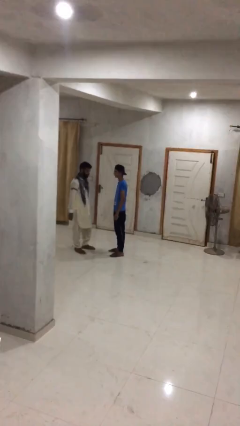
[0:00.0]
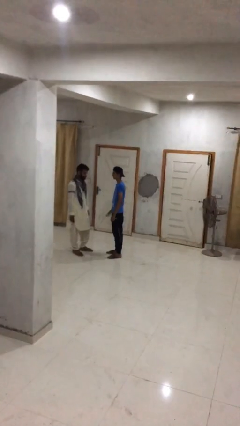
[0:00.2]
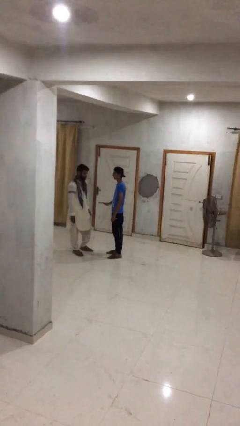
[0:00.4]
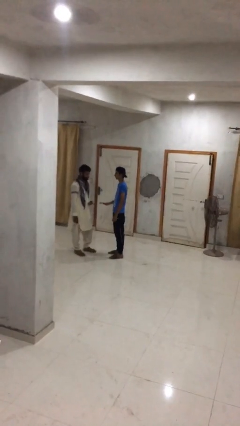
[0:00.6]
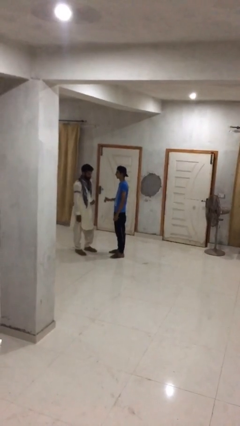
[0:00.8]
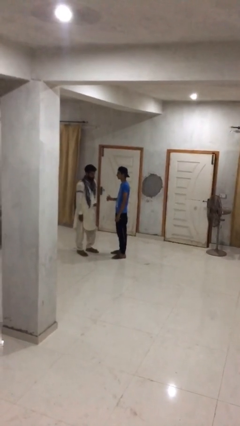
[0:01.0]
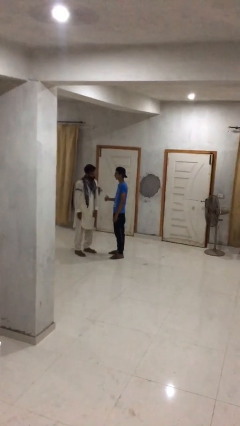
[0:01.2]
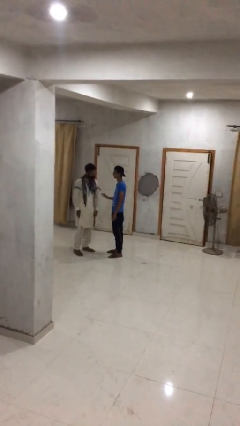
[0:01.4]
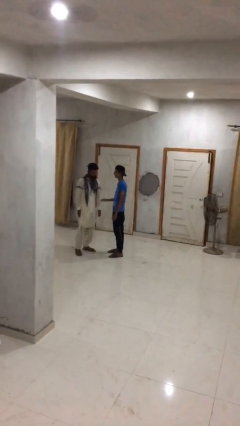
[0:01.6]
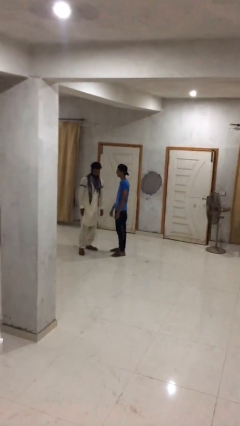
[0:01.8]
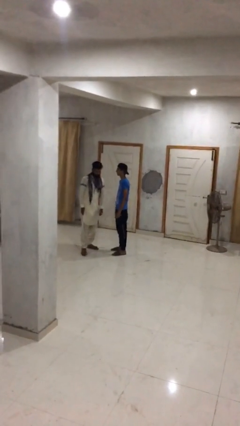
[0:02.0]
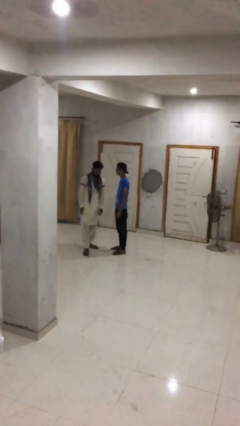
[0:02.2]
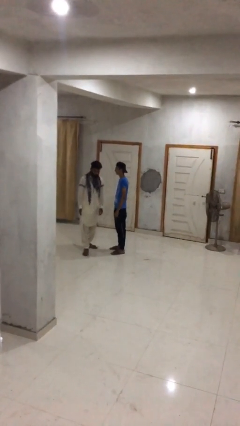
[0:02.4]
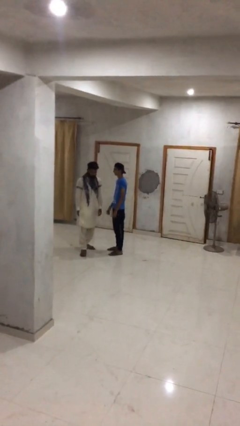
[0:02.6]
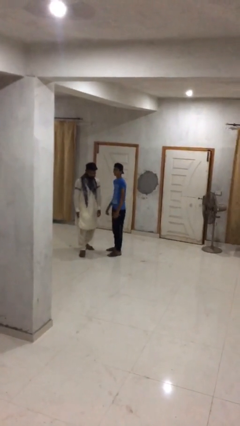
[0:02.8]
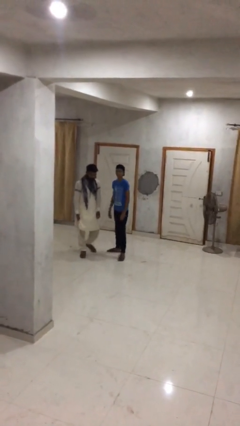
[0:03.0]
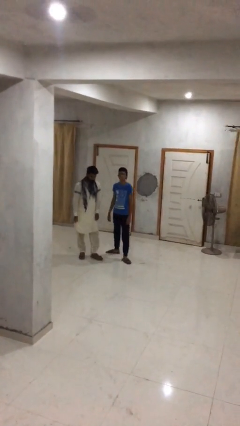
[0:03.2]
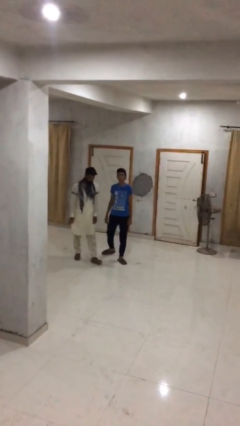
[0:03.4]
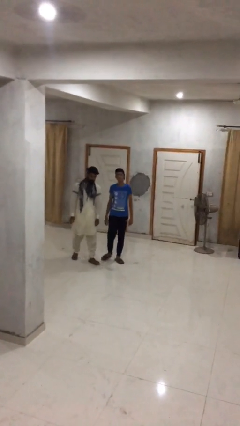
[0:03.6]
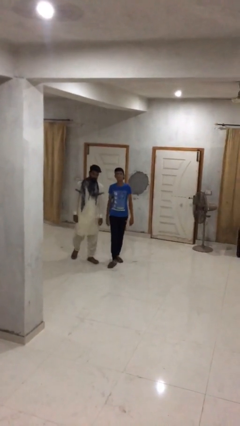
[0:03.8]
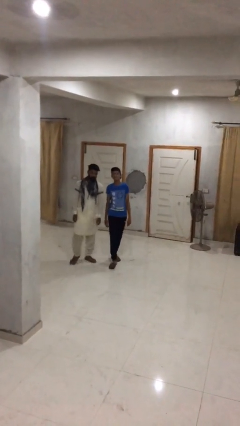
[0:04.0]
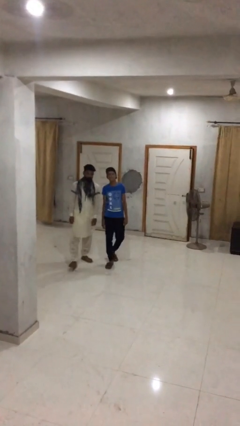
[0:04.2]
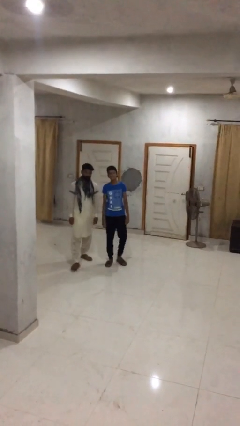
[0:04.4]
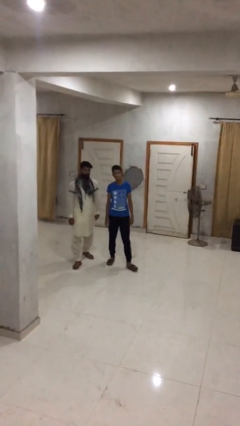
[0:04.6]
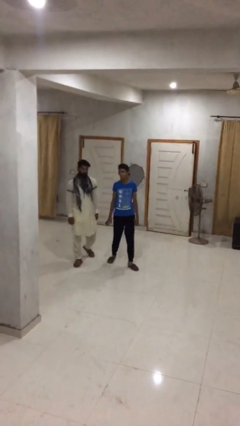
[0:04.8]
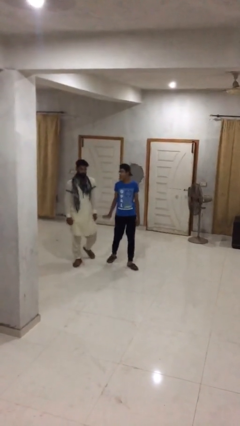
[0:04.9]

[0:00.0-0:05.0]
person talks to person

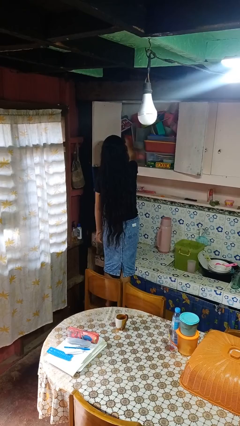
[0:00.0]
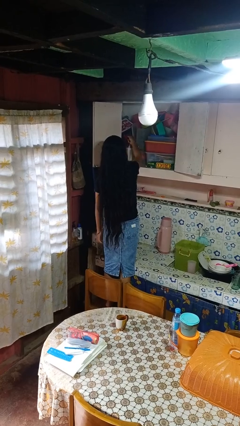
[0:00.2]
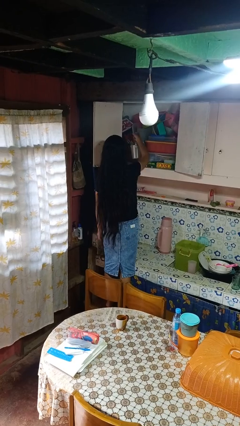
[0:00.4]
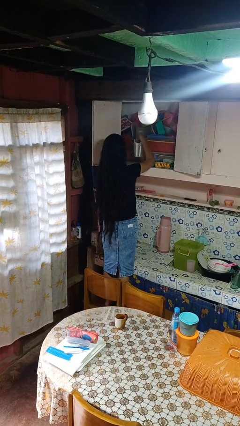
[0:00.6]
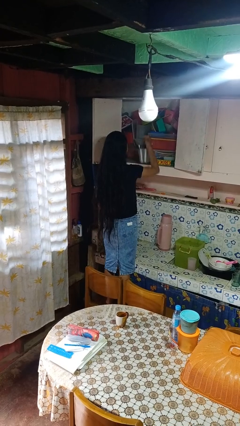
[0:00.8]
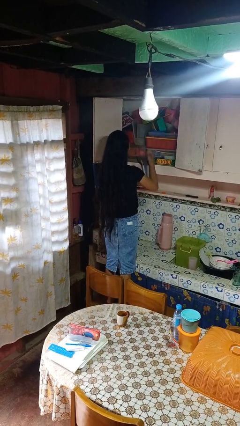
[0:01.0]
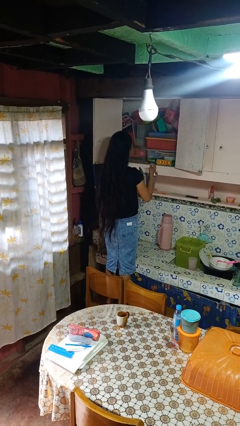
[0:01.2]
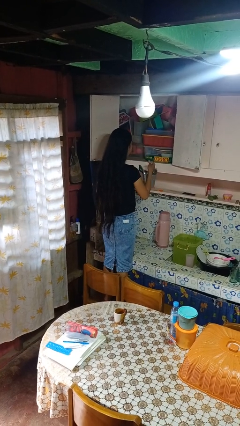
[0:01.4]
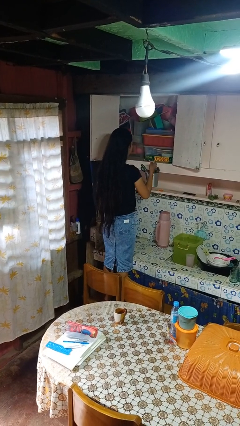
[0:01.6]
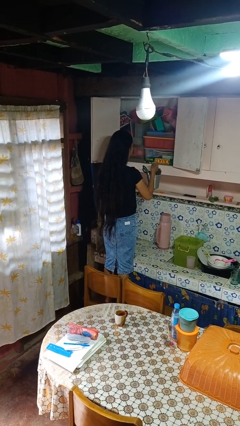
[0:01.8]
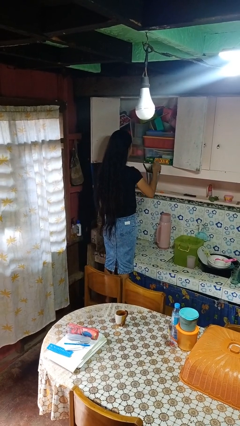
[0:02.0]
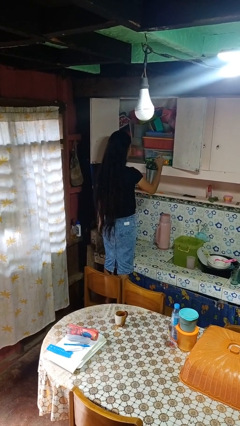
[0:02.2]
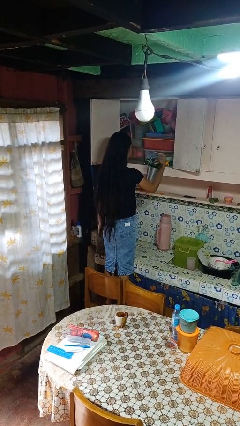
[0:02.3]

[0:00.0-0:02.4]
person takes object from cabinet

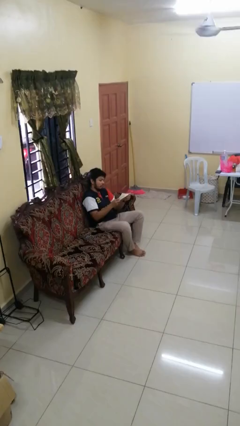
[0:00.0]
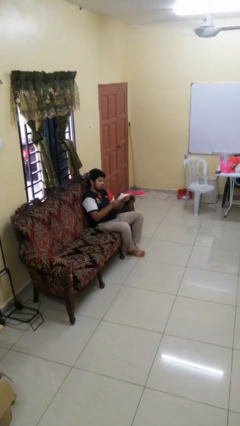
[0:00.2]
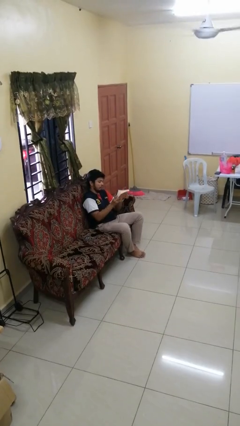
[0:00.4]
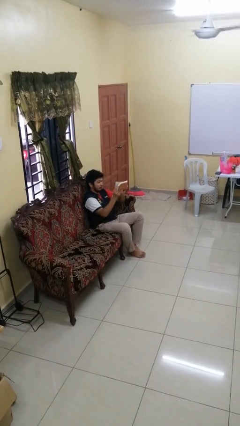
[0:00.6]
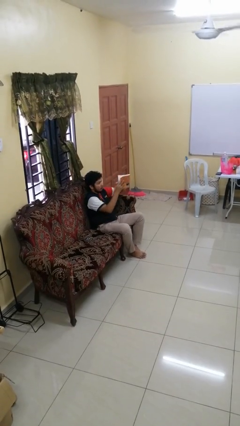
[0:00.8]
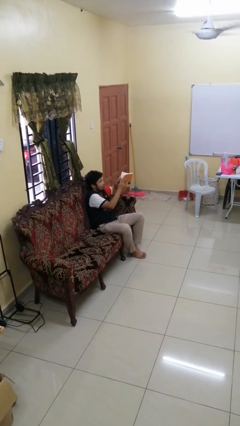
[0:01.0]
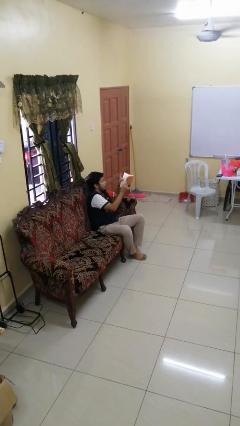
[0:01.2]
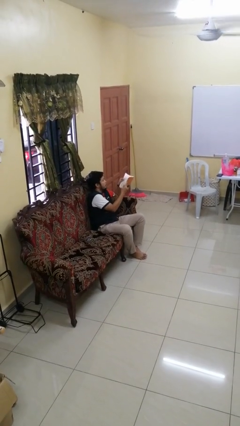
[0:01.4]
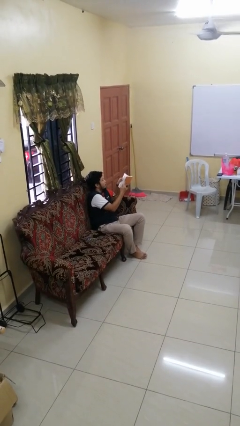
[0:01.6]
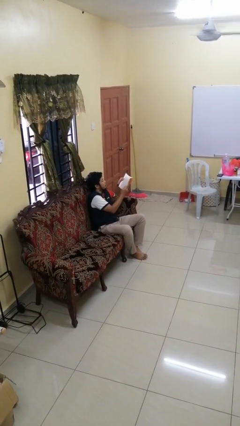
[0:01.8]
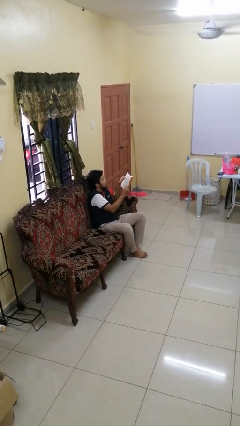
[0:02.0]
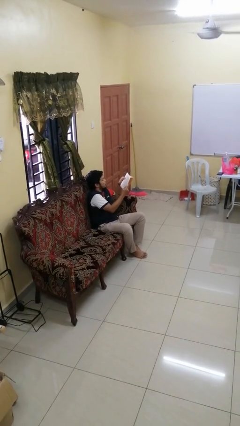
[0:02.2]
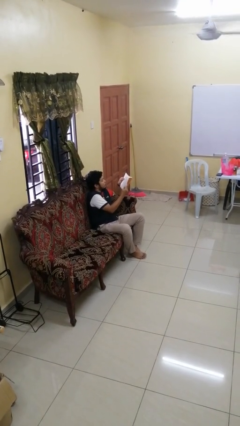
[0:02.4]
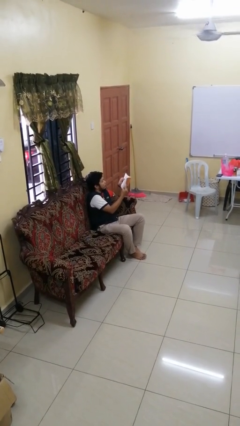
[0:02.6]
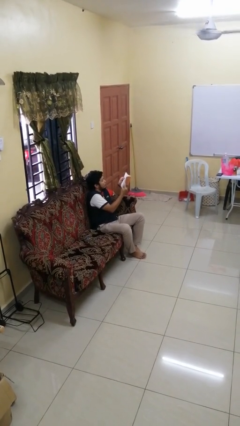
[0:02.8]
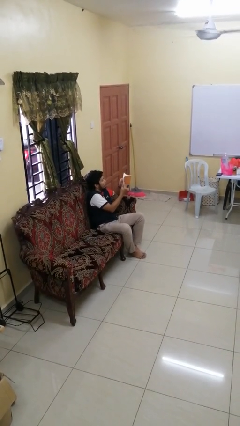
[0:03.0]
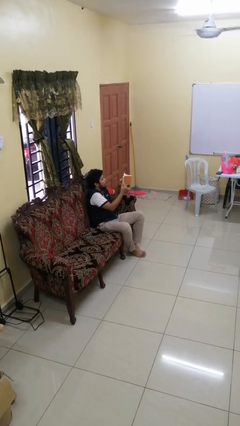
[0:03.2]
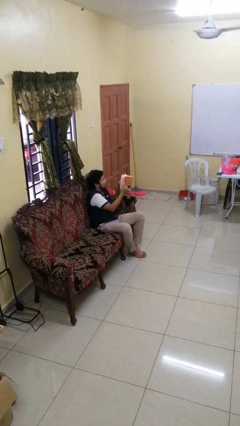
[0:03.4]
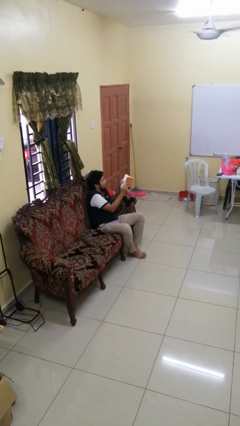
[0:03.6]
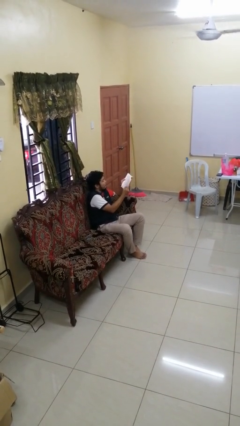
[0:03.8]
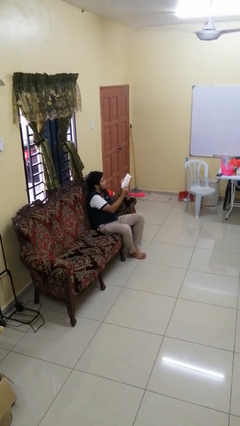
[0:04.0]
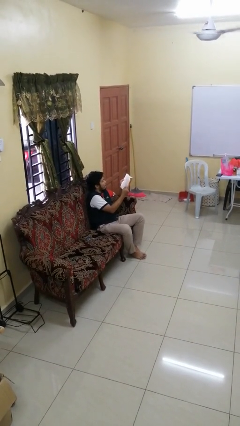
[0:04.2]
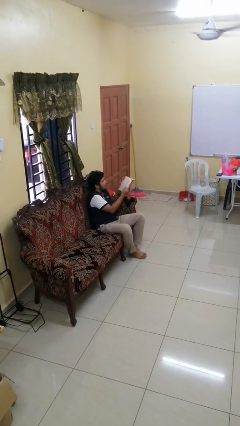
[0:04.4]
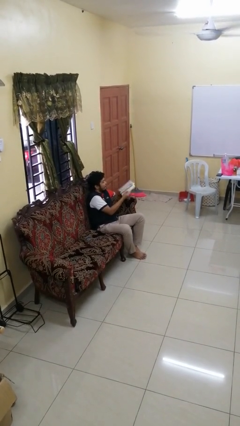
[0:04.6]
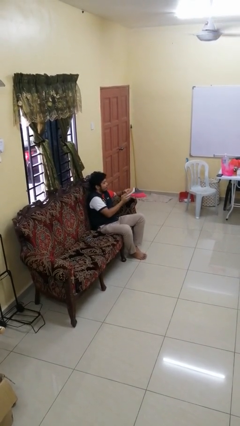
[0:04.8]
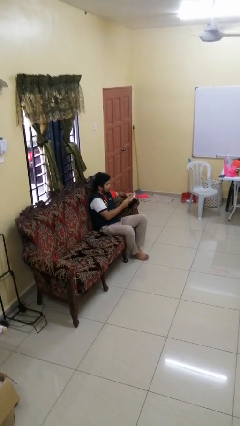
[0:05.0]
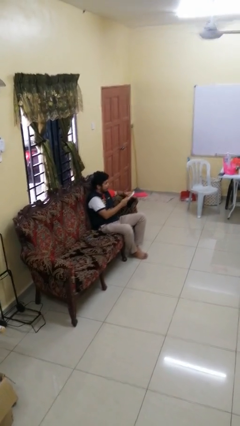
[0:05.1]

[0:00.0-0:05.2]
person reads book

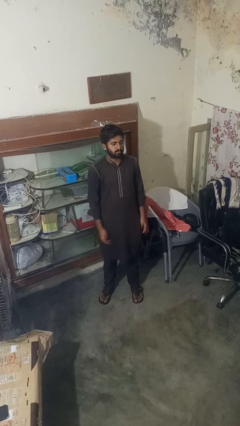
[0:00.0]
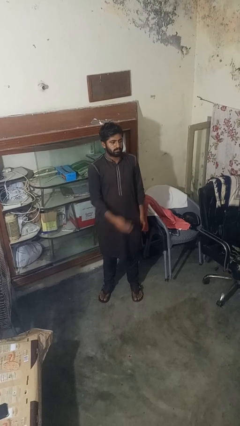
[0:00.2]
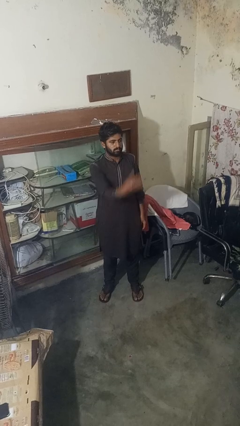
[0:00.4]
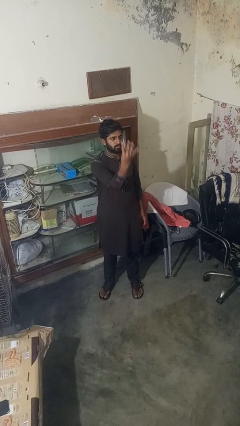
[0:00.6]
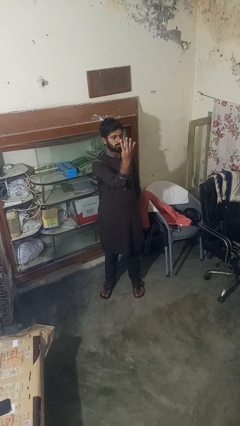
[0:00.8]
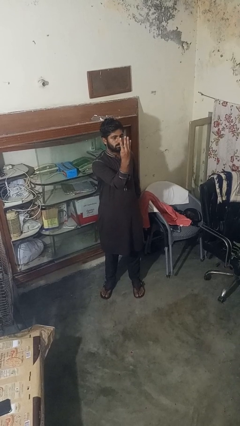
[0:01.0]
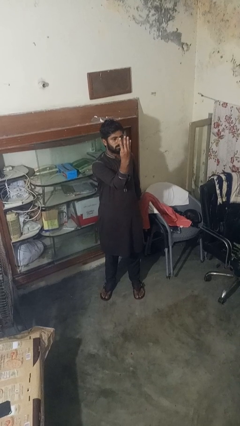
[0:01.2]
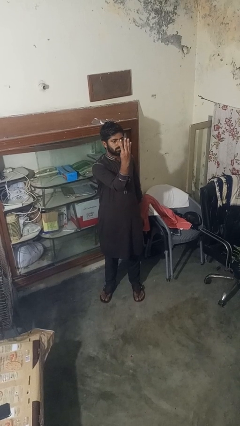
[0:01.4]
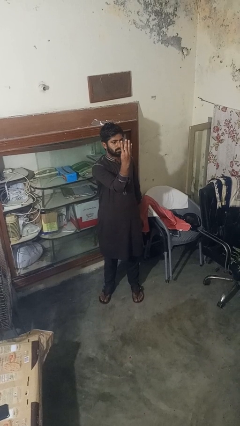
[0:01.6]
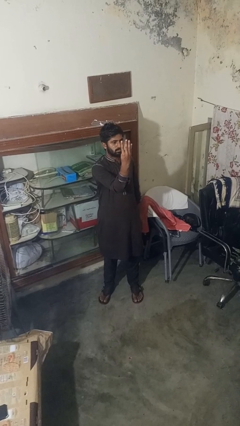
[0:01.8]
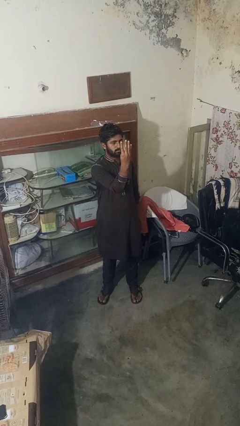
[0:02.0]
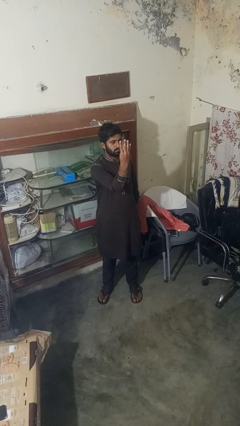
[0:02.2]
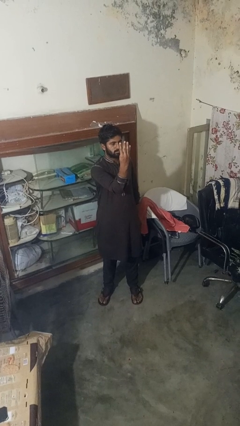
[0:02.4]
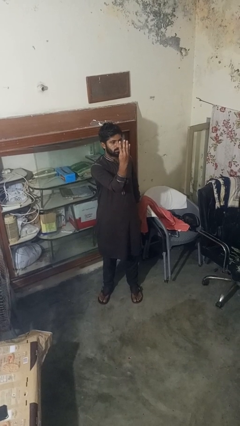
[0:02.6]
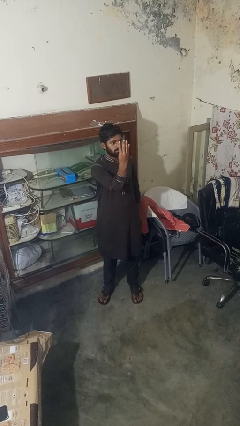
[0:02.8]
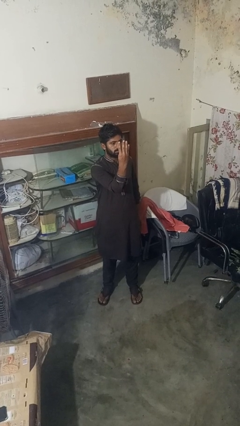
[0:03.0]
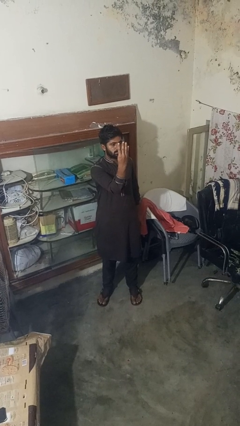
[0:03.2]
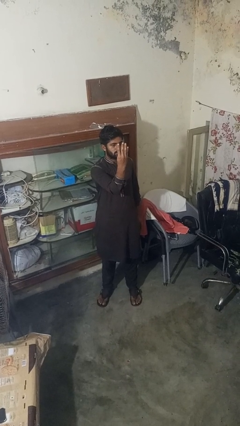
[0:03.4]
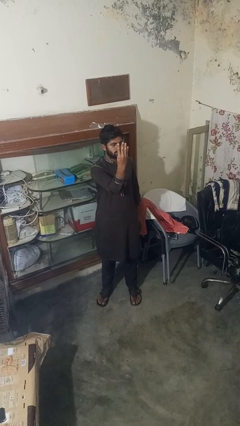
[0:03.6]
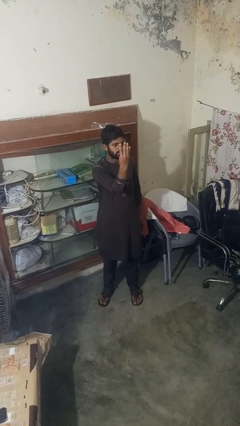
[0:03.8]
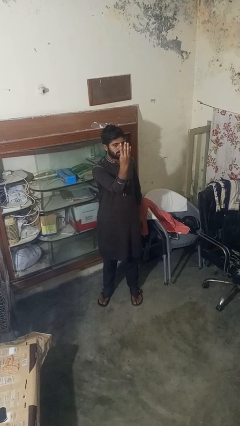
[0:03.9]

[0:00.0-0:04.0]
person gestures number four

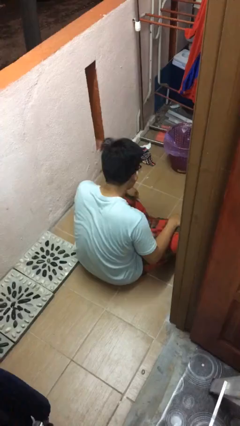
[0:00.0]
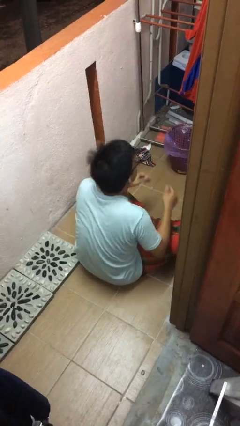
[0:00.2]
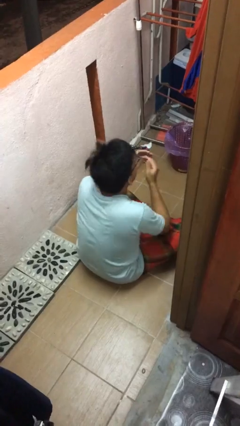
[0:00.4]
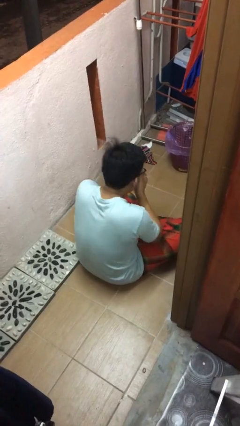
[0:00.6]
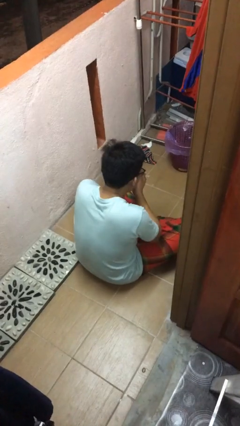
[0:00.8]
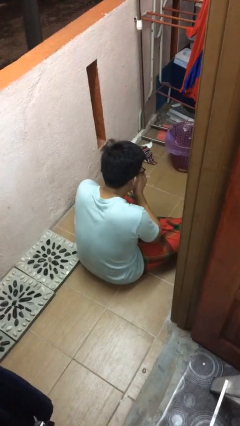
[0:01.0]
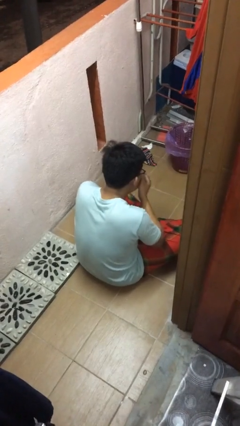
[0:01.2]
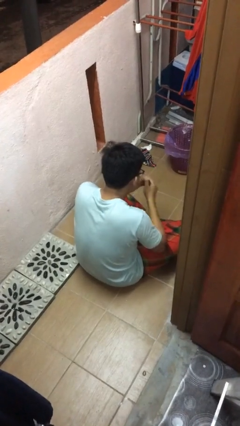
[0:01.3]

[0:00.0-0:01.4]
person sneezes into hand
